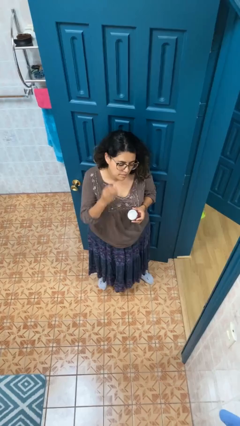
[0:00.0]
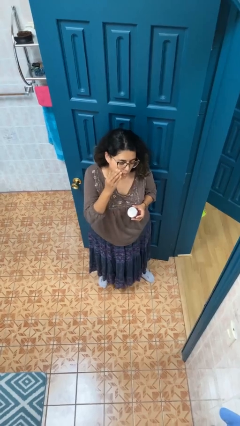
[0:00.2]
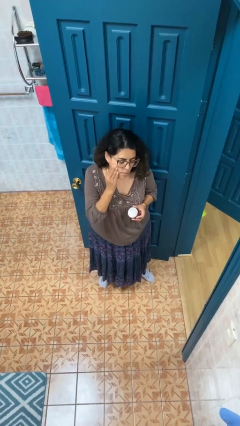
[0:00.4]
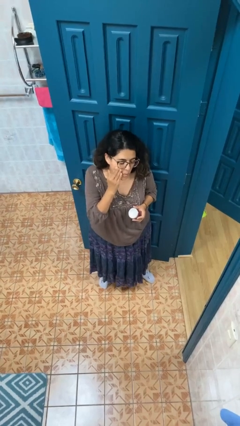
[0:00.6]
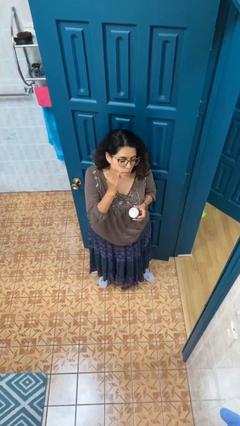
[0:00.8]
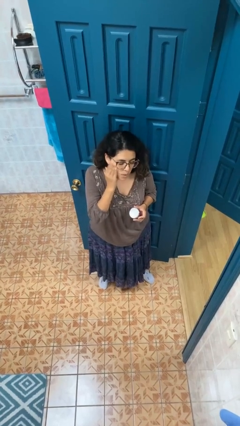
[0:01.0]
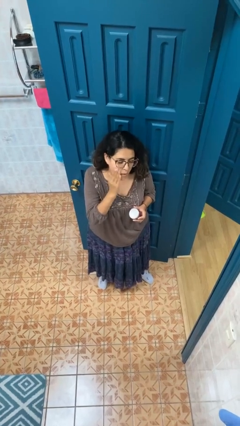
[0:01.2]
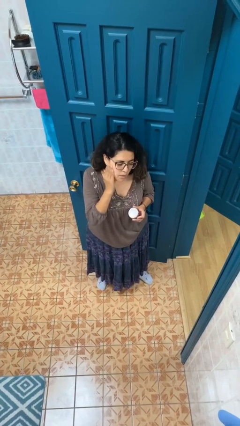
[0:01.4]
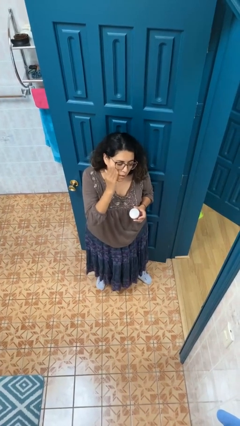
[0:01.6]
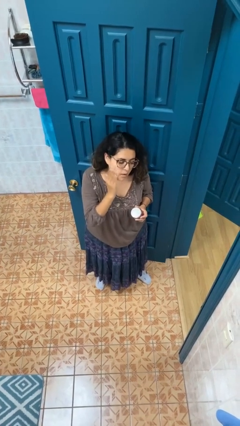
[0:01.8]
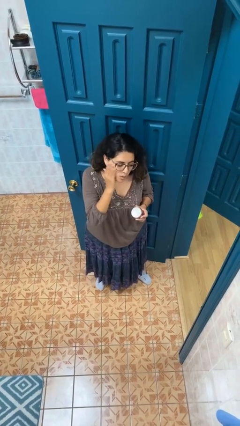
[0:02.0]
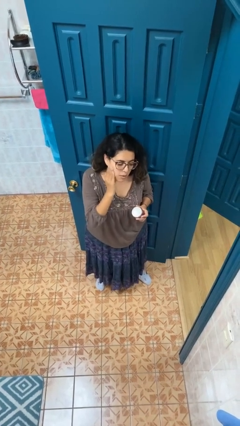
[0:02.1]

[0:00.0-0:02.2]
person applies facial moisturizer

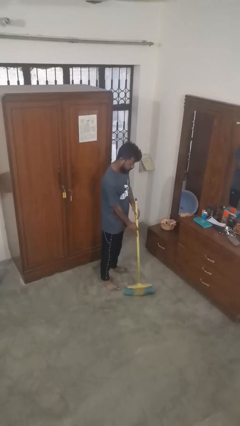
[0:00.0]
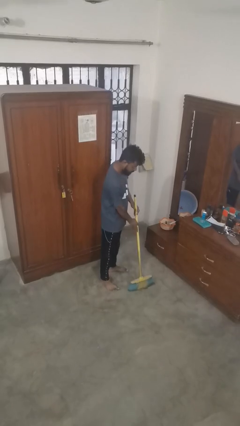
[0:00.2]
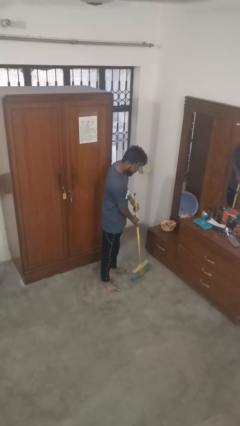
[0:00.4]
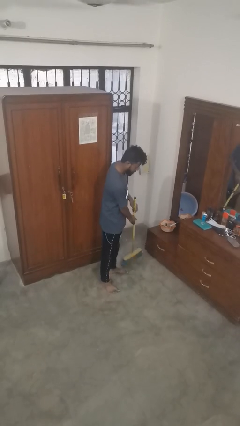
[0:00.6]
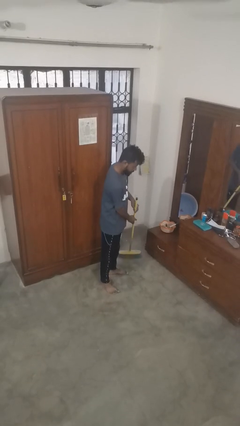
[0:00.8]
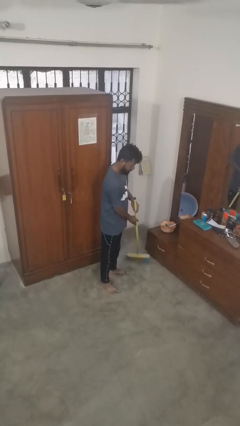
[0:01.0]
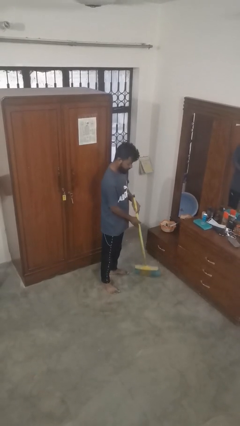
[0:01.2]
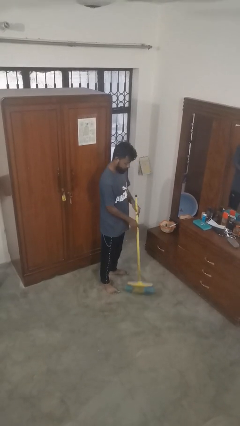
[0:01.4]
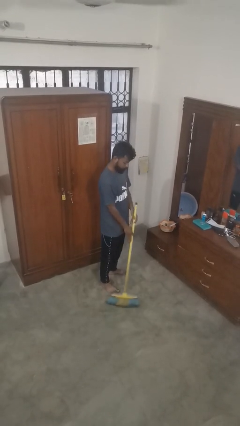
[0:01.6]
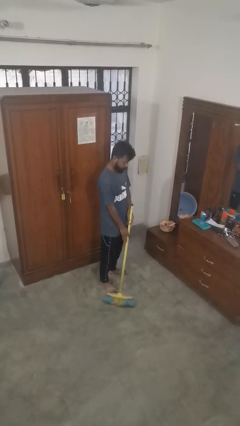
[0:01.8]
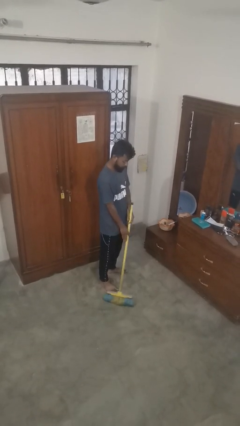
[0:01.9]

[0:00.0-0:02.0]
person sweeps floor

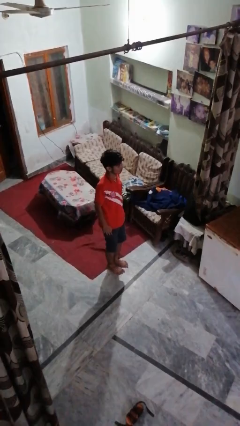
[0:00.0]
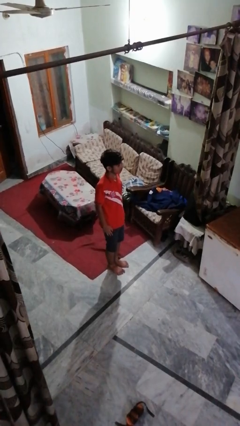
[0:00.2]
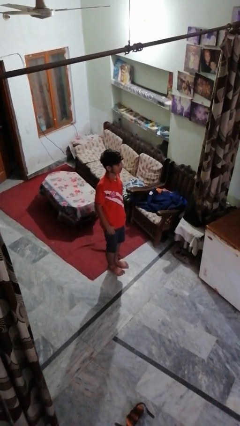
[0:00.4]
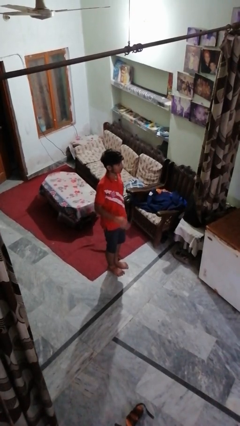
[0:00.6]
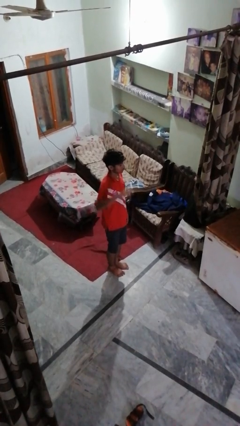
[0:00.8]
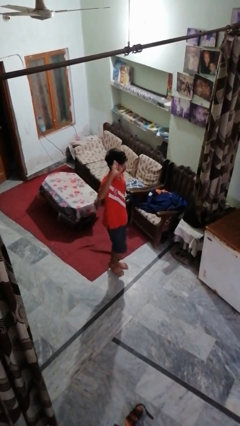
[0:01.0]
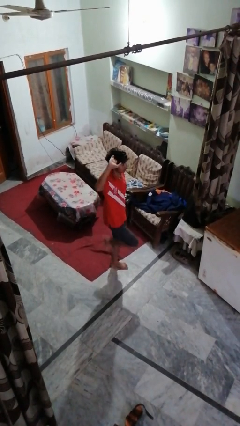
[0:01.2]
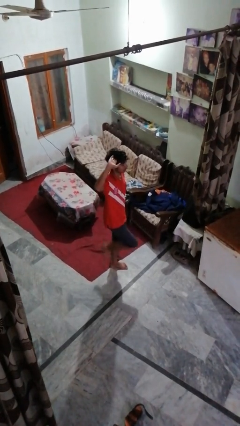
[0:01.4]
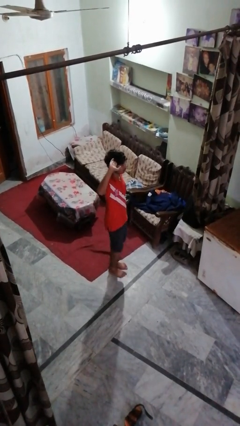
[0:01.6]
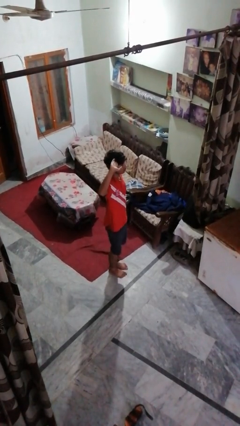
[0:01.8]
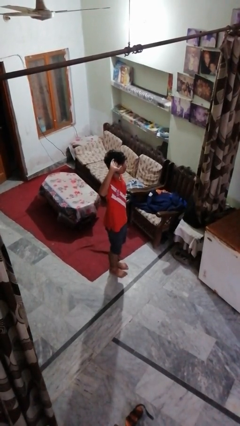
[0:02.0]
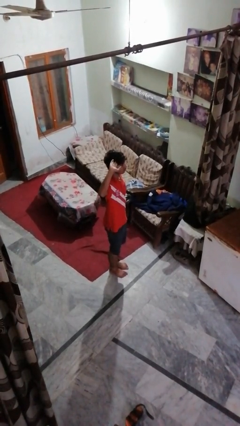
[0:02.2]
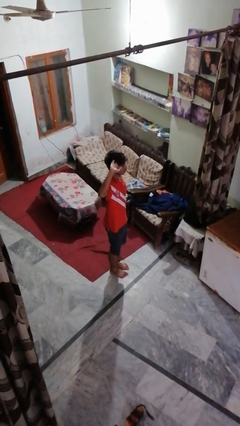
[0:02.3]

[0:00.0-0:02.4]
person salutes

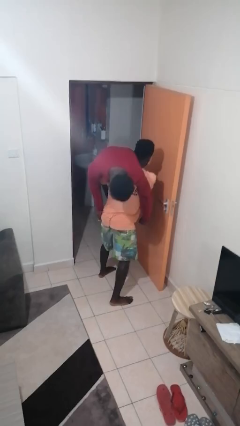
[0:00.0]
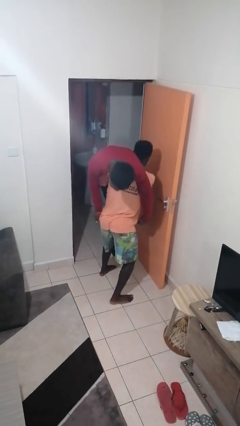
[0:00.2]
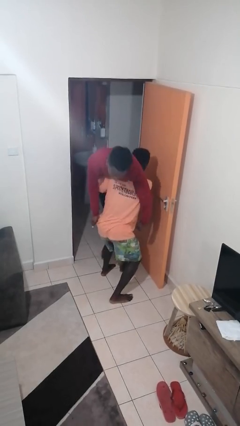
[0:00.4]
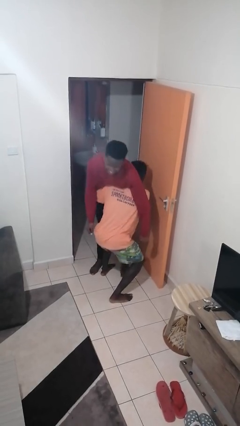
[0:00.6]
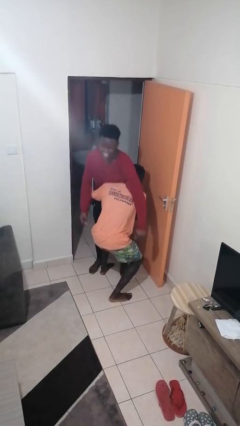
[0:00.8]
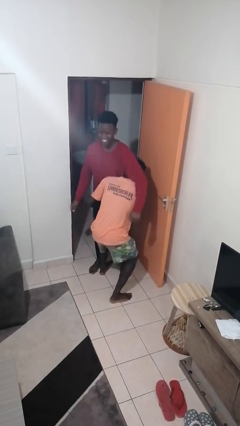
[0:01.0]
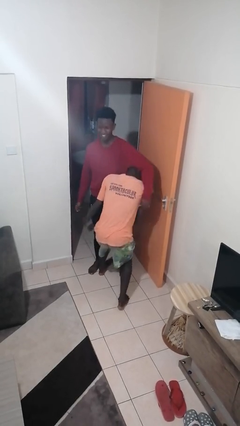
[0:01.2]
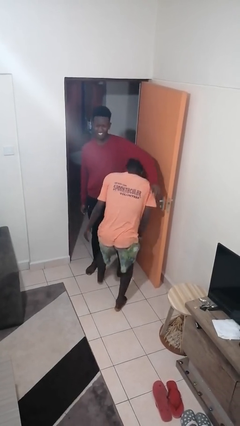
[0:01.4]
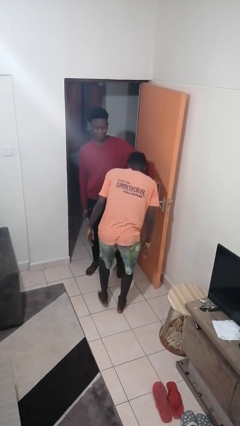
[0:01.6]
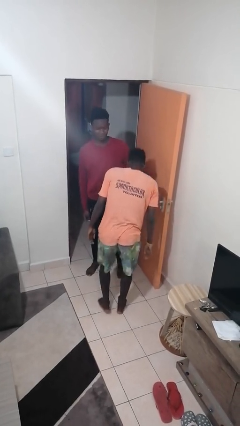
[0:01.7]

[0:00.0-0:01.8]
person puts down person

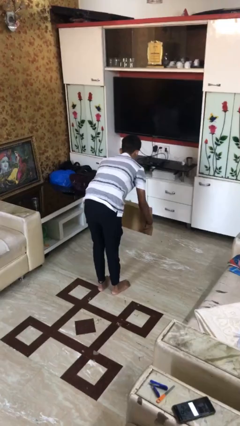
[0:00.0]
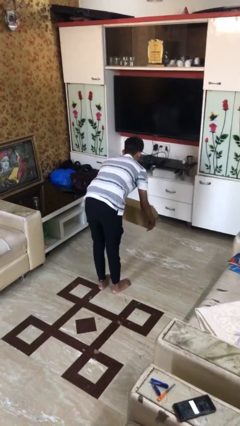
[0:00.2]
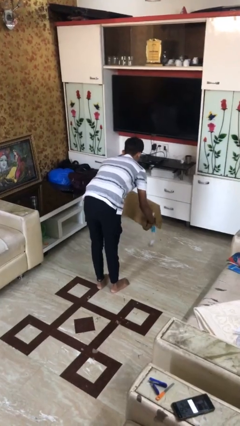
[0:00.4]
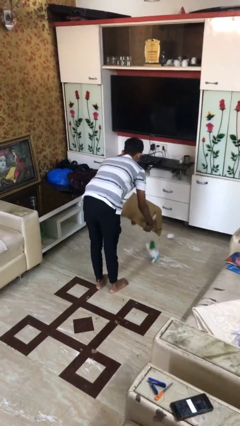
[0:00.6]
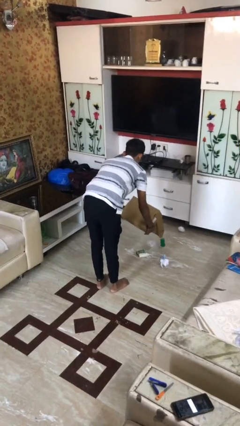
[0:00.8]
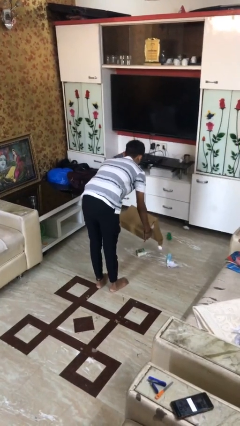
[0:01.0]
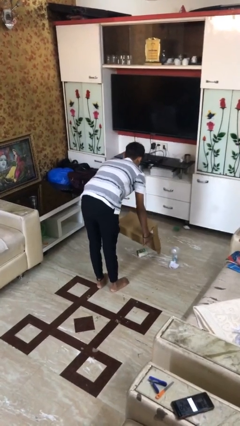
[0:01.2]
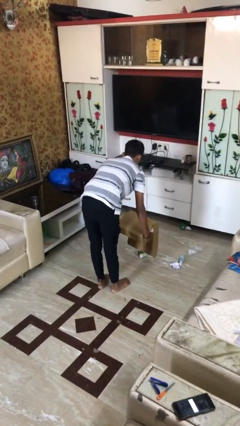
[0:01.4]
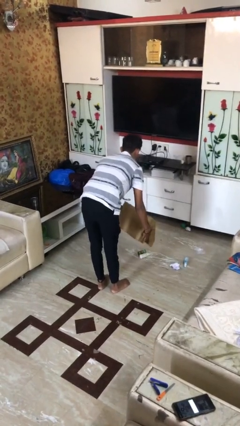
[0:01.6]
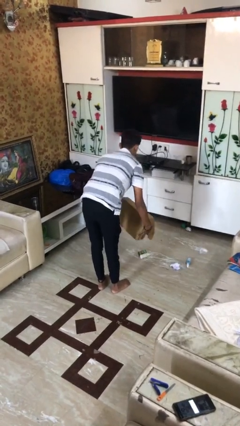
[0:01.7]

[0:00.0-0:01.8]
person unloads box onto floor

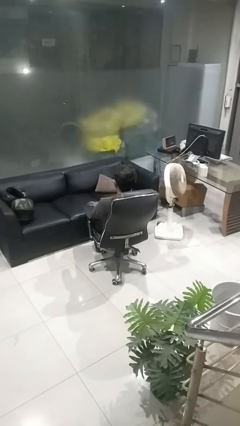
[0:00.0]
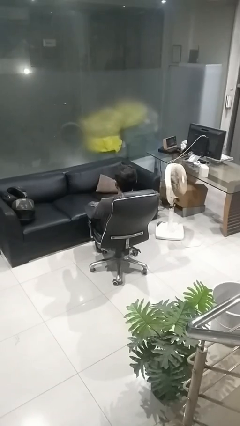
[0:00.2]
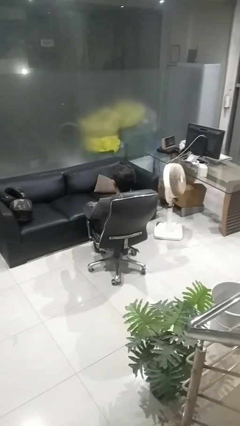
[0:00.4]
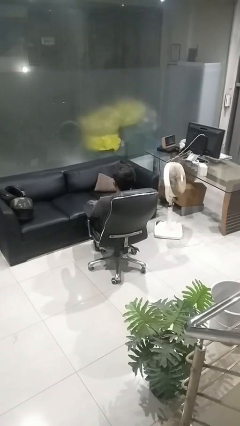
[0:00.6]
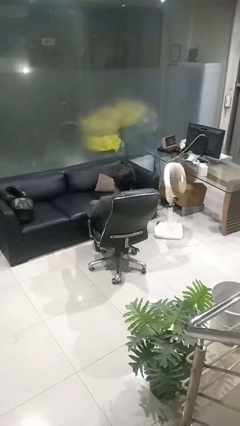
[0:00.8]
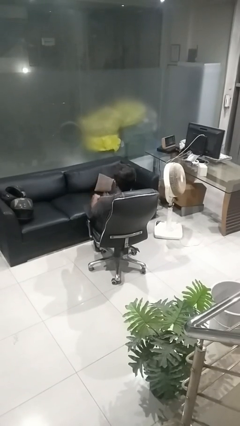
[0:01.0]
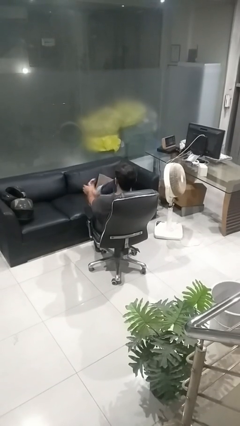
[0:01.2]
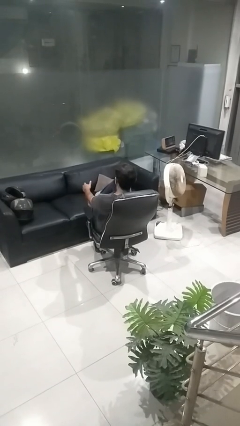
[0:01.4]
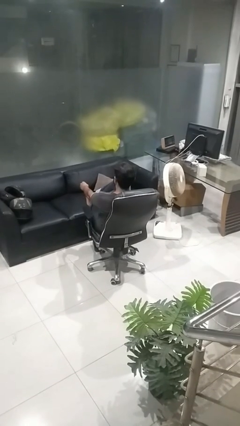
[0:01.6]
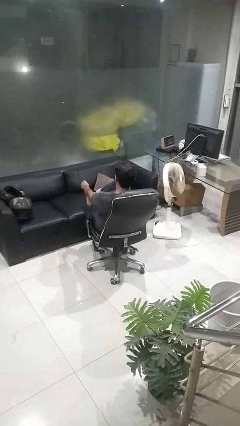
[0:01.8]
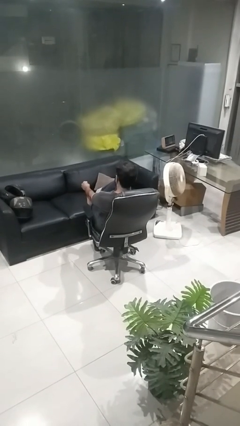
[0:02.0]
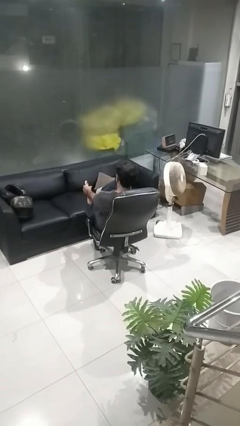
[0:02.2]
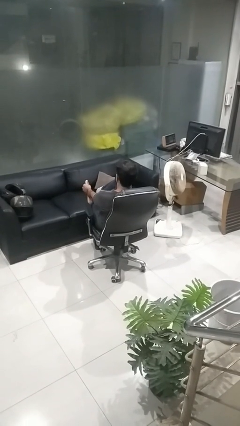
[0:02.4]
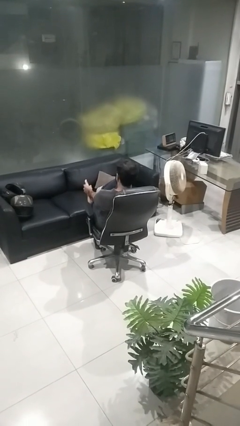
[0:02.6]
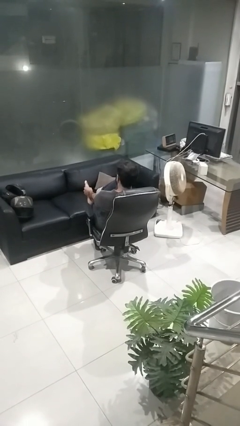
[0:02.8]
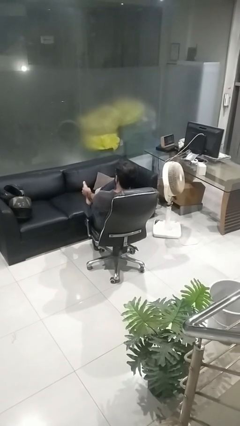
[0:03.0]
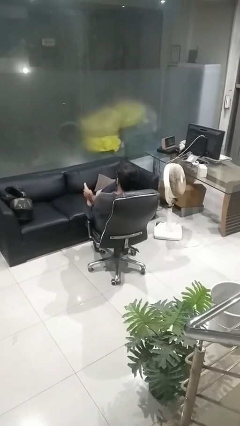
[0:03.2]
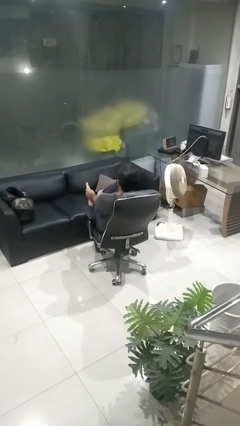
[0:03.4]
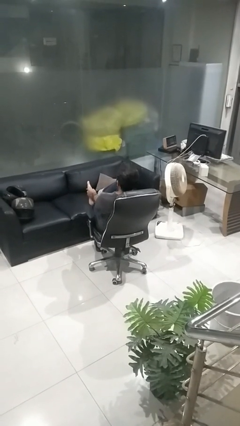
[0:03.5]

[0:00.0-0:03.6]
person rubs foot

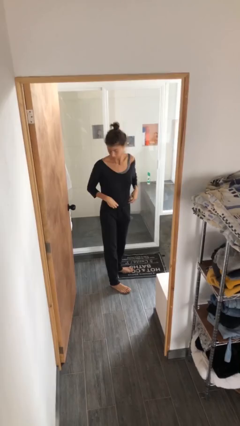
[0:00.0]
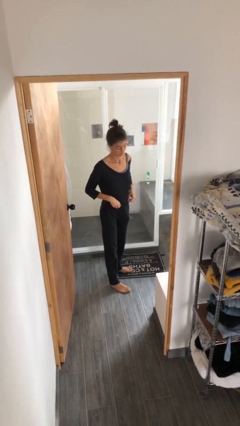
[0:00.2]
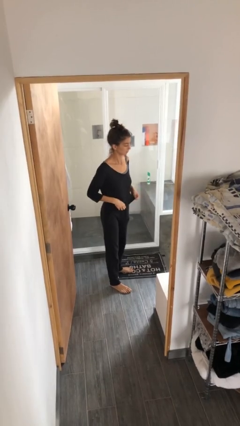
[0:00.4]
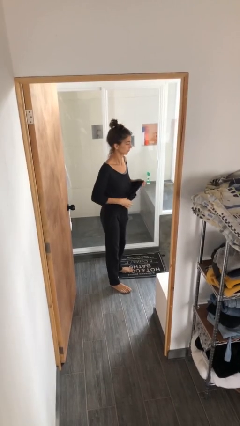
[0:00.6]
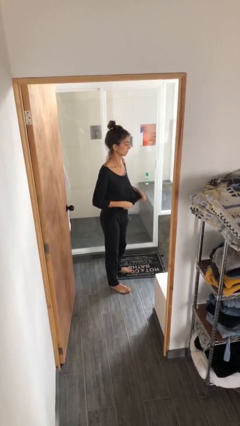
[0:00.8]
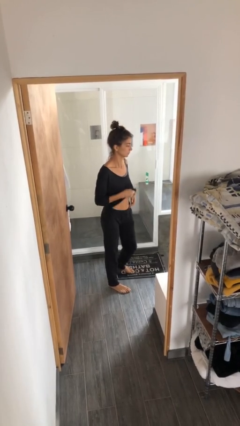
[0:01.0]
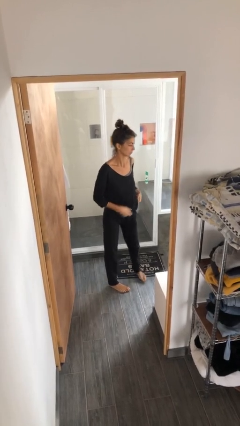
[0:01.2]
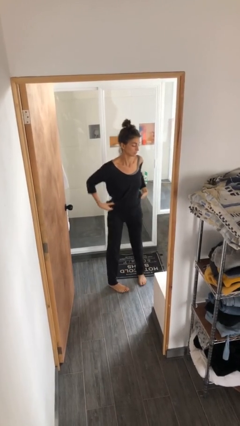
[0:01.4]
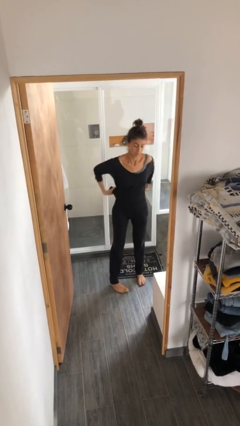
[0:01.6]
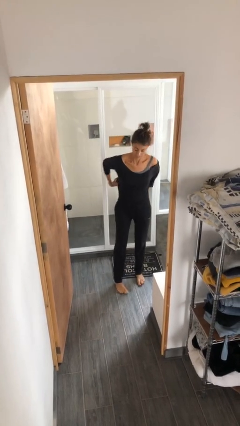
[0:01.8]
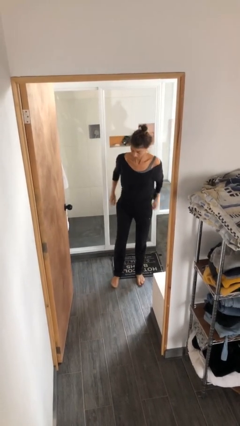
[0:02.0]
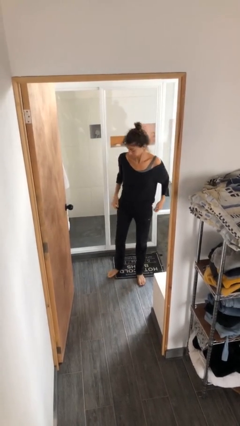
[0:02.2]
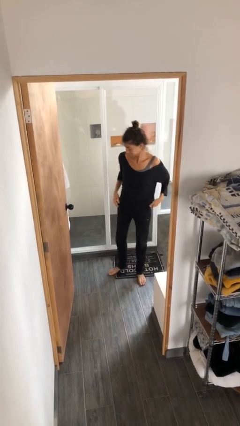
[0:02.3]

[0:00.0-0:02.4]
person untucks shirt

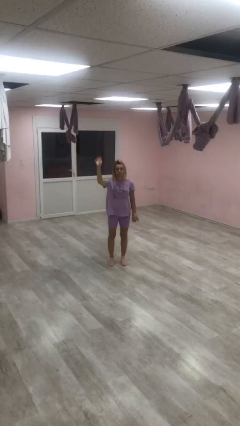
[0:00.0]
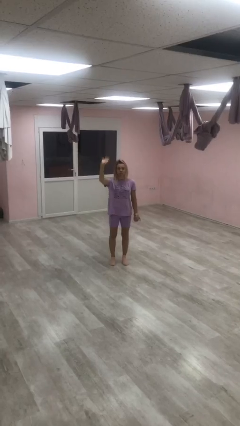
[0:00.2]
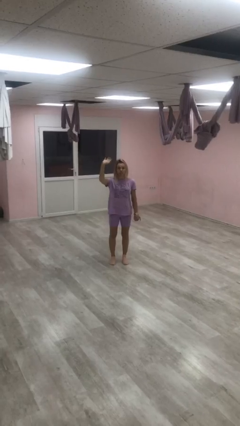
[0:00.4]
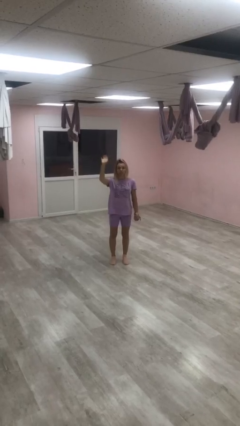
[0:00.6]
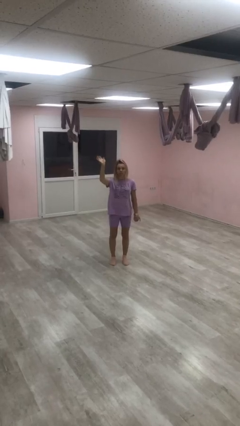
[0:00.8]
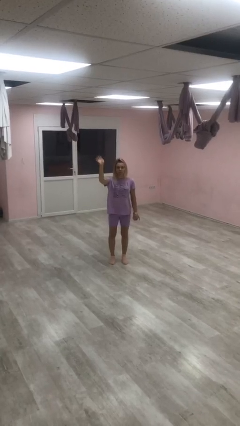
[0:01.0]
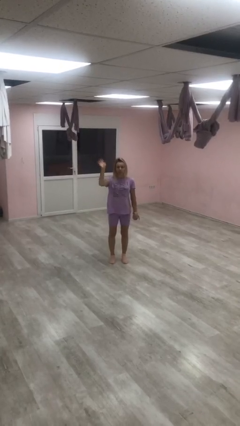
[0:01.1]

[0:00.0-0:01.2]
person waves at person
